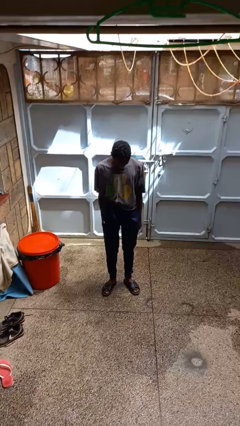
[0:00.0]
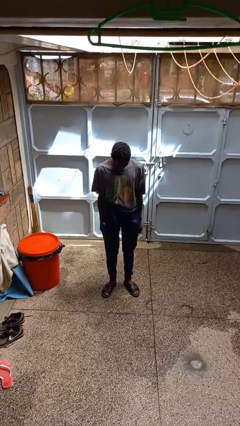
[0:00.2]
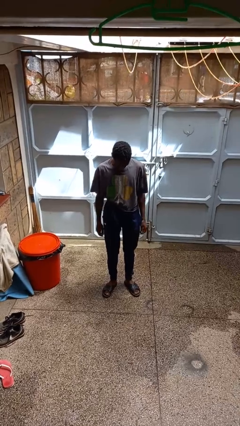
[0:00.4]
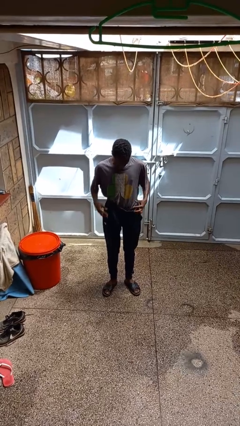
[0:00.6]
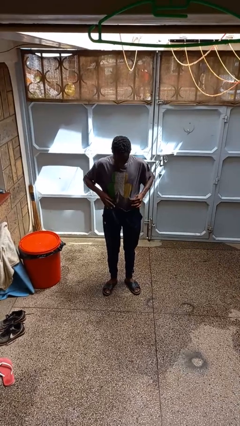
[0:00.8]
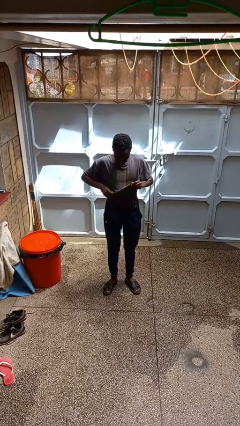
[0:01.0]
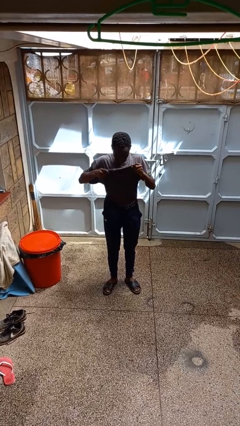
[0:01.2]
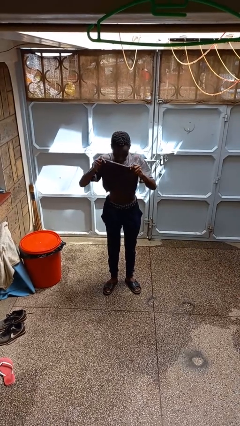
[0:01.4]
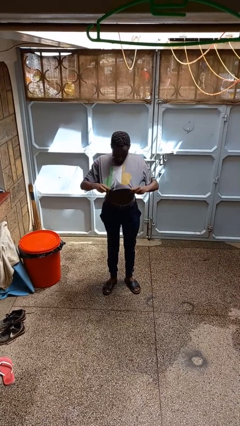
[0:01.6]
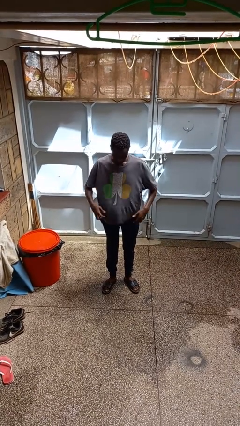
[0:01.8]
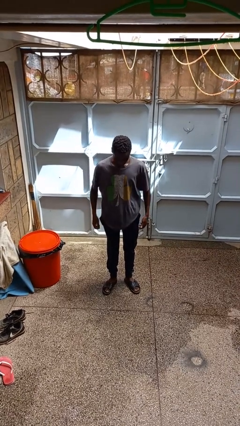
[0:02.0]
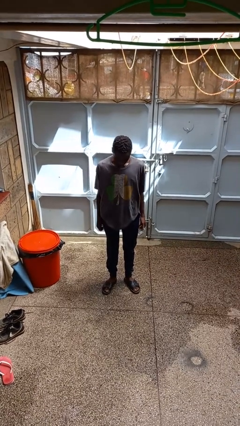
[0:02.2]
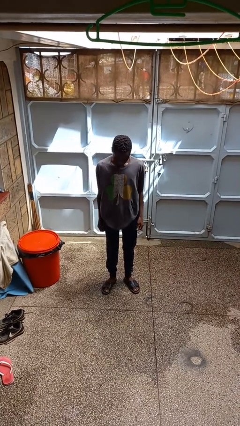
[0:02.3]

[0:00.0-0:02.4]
person untucks shirt

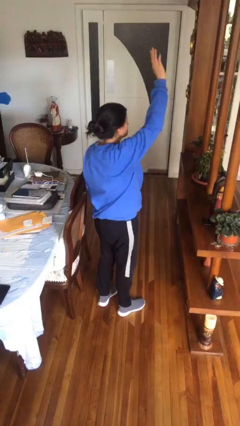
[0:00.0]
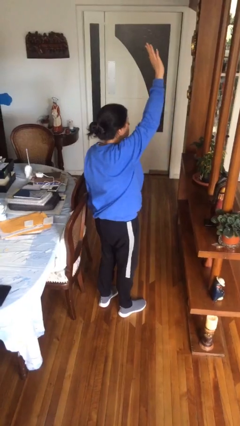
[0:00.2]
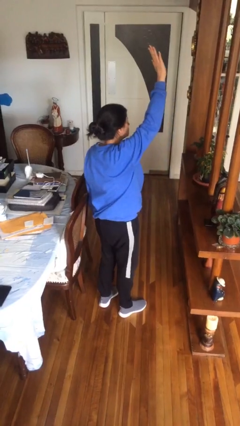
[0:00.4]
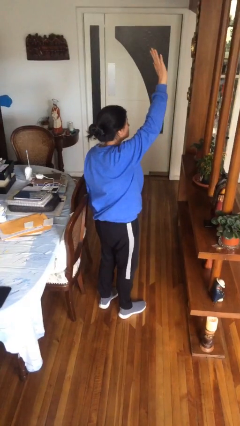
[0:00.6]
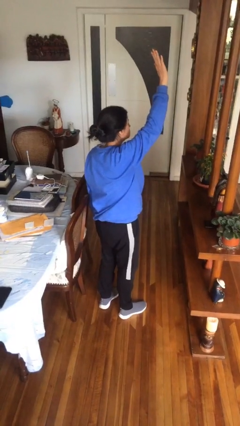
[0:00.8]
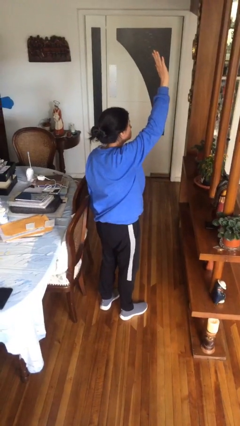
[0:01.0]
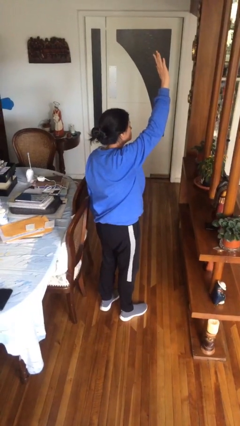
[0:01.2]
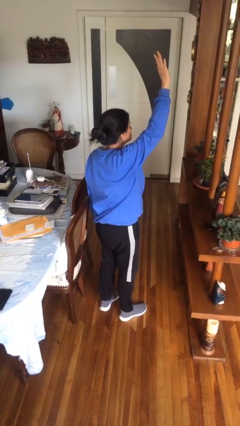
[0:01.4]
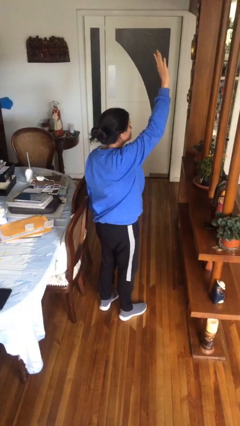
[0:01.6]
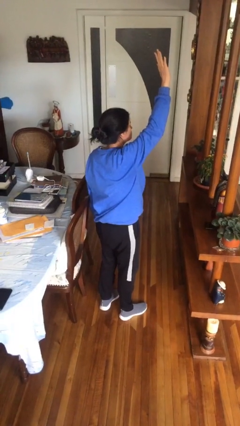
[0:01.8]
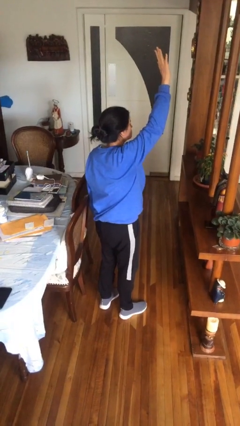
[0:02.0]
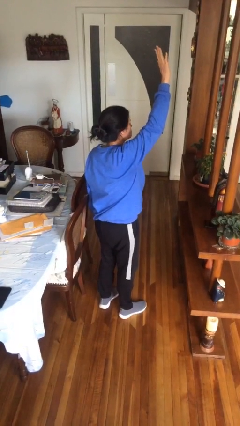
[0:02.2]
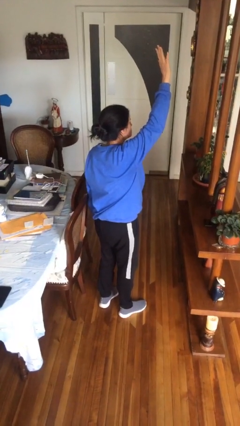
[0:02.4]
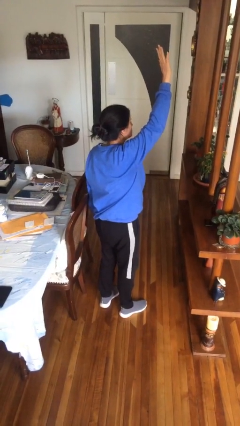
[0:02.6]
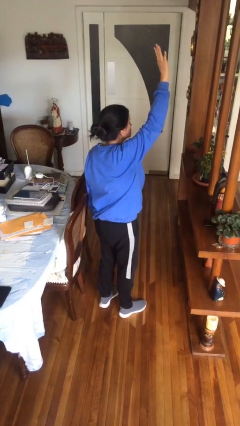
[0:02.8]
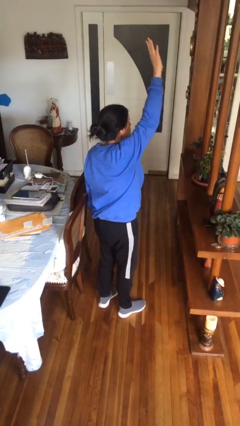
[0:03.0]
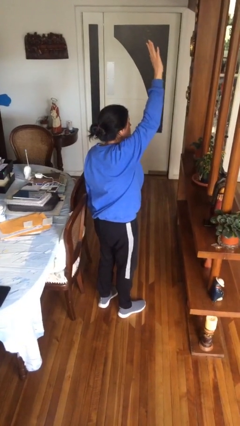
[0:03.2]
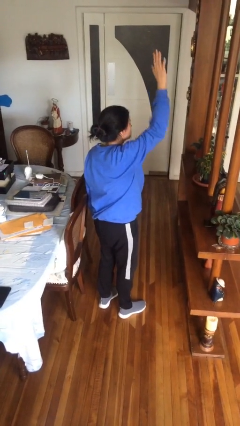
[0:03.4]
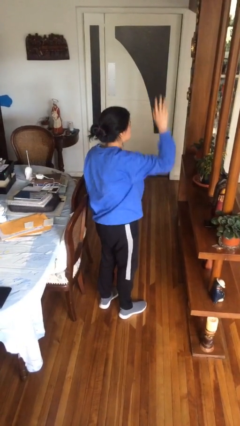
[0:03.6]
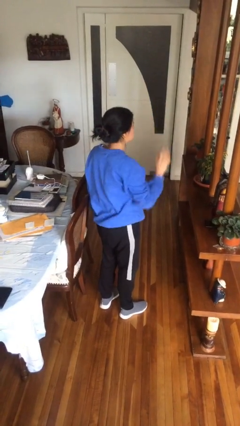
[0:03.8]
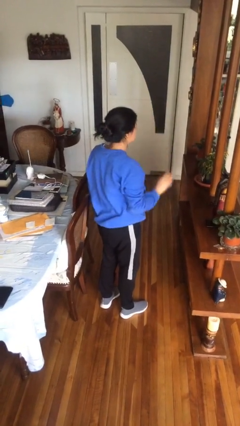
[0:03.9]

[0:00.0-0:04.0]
person gestures raise hand

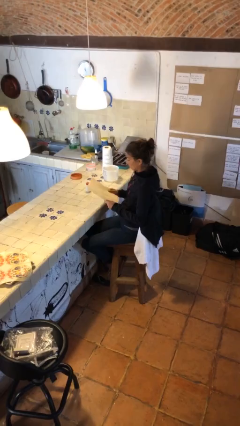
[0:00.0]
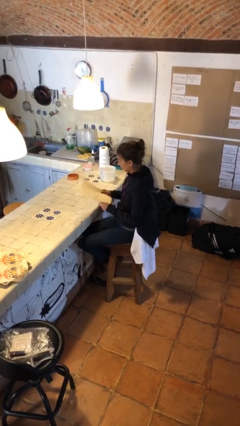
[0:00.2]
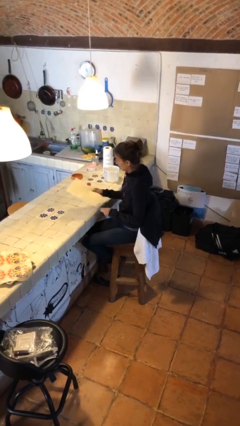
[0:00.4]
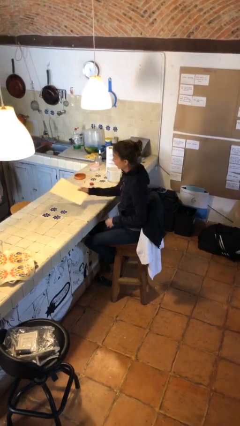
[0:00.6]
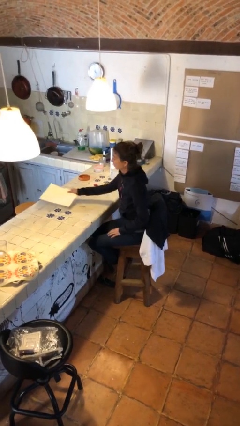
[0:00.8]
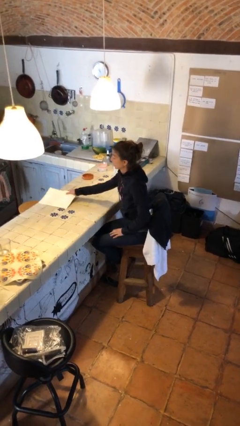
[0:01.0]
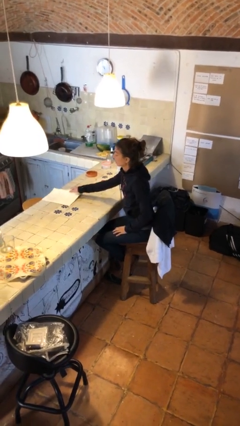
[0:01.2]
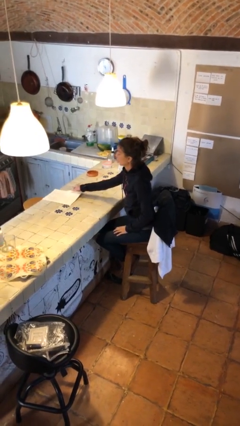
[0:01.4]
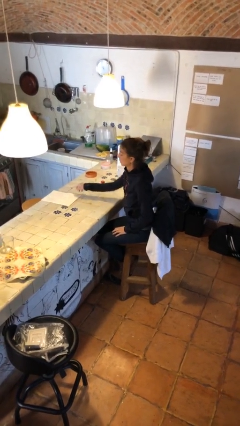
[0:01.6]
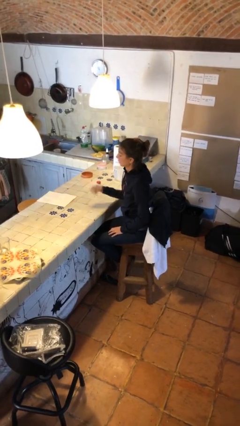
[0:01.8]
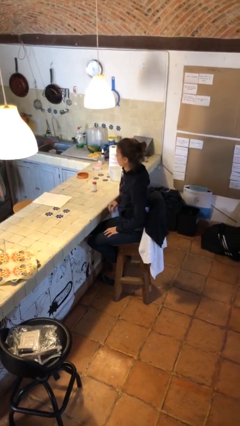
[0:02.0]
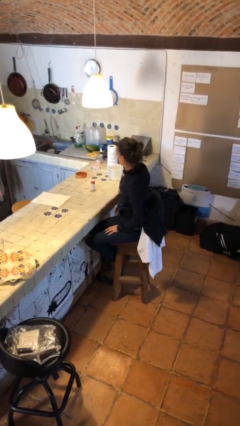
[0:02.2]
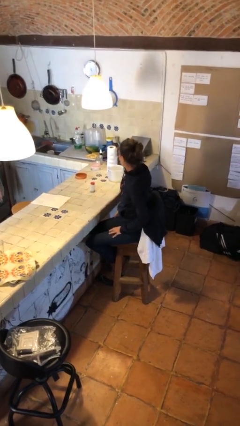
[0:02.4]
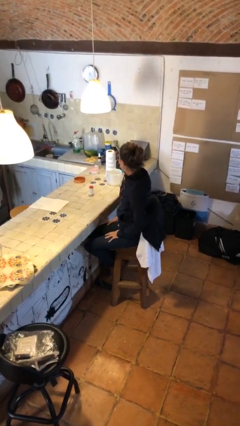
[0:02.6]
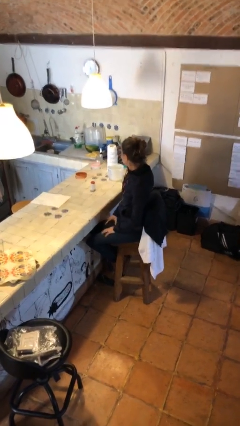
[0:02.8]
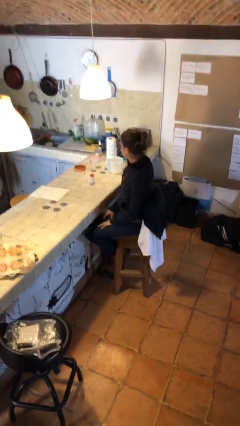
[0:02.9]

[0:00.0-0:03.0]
person puts down object on table

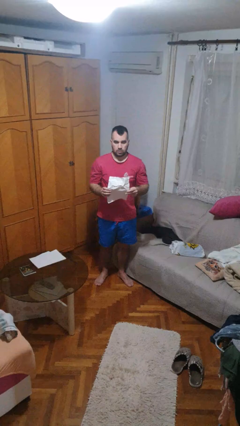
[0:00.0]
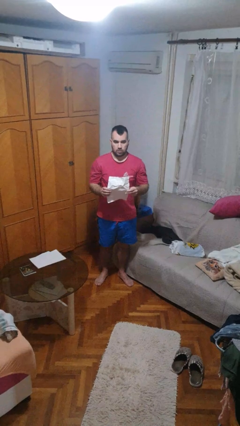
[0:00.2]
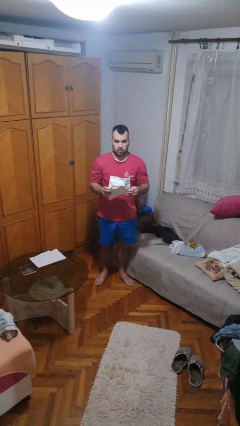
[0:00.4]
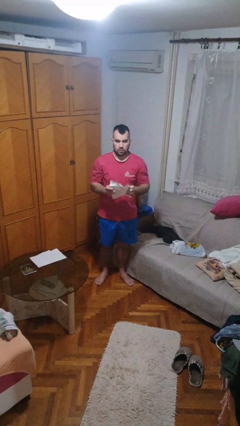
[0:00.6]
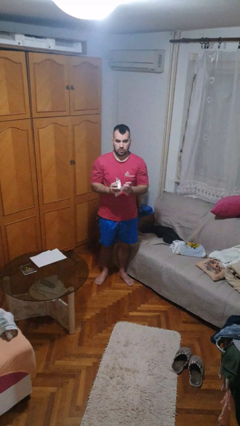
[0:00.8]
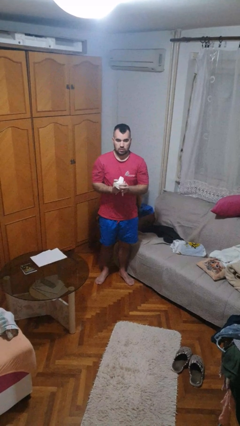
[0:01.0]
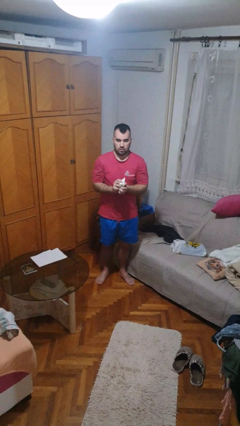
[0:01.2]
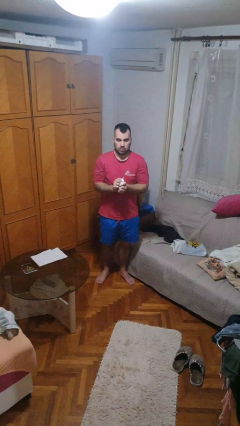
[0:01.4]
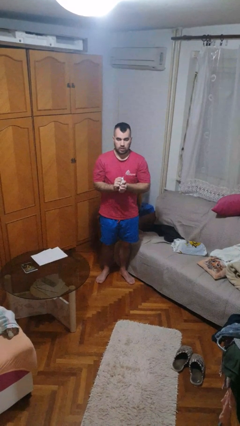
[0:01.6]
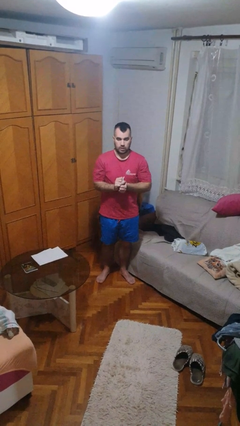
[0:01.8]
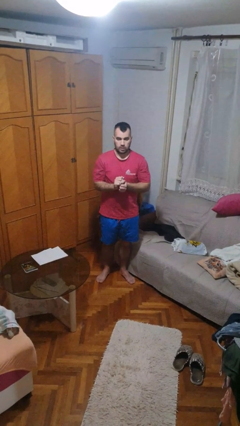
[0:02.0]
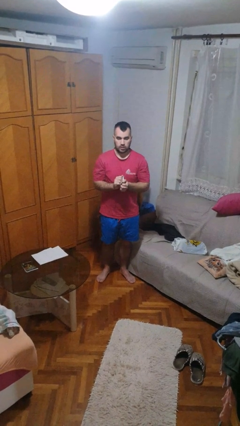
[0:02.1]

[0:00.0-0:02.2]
person crumples paper

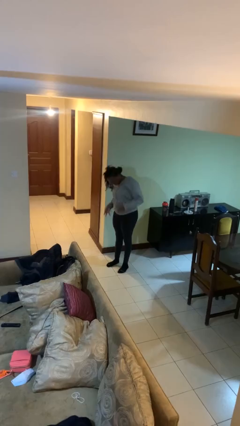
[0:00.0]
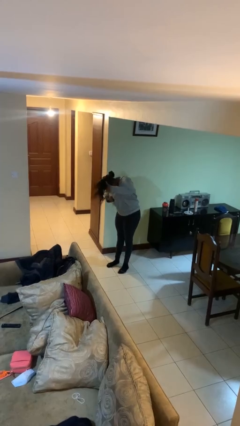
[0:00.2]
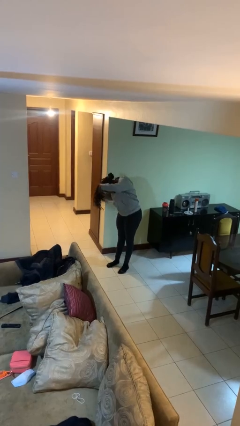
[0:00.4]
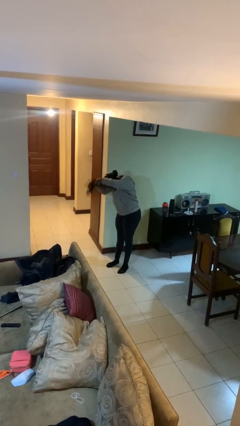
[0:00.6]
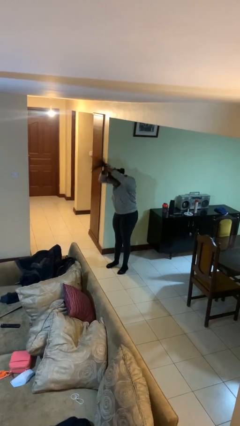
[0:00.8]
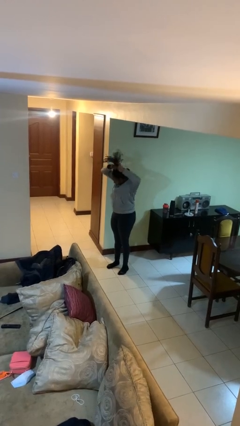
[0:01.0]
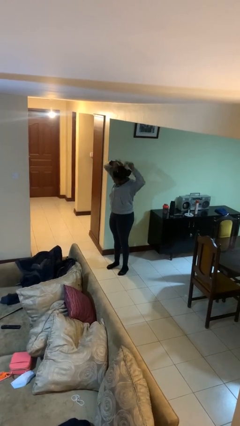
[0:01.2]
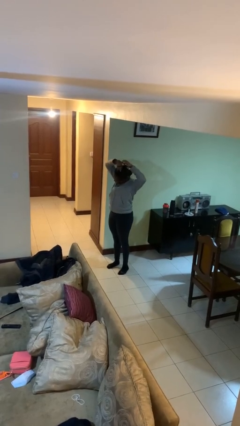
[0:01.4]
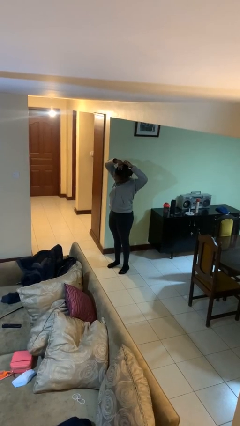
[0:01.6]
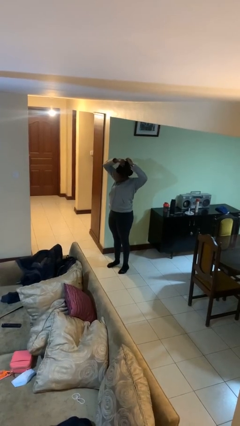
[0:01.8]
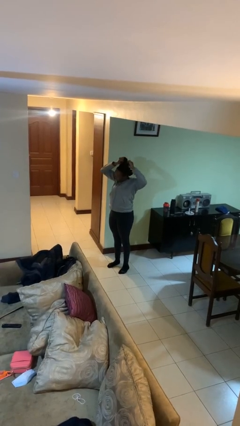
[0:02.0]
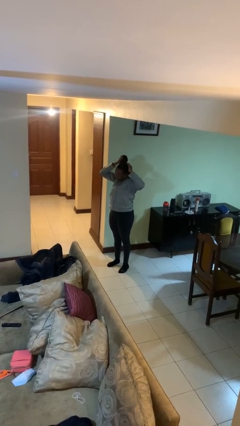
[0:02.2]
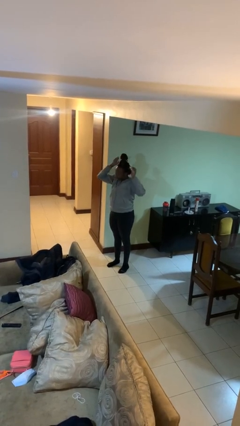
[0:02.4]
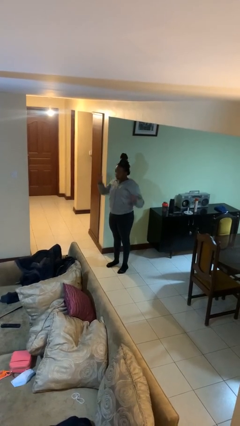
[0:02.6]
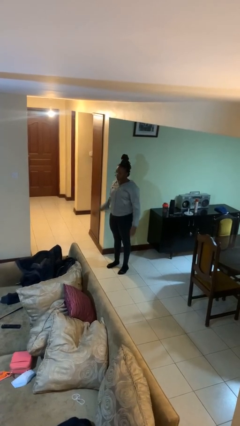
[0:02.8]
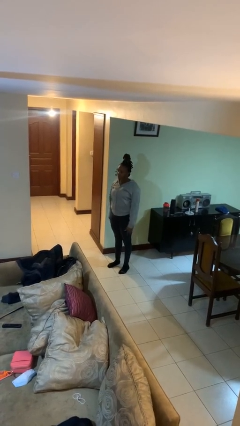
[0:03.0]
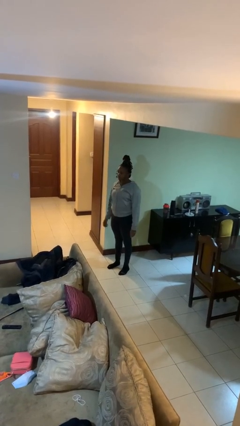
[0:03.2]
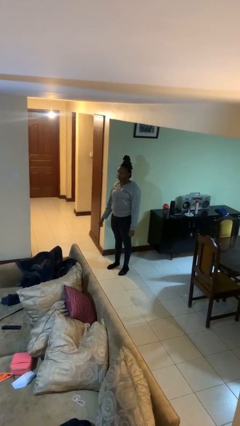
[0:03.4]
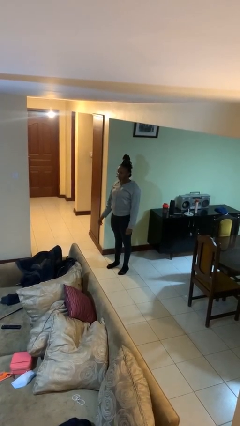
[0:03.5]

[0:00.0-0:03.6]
person puts hair in ponytail

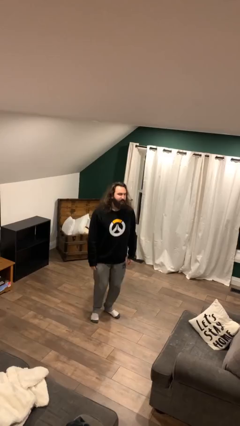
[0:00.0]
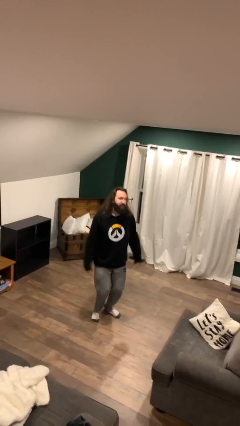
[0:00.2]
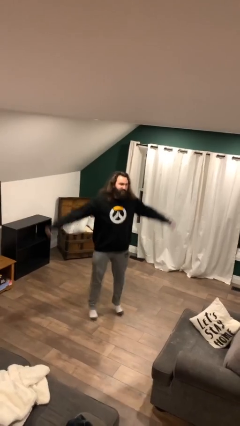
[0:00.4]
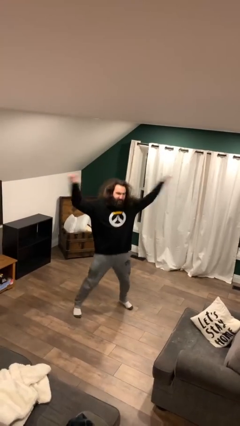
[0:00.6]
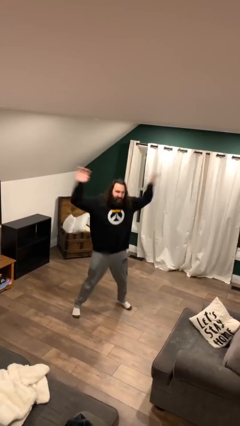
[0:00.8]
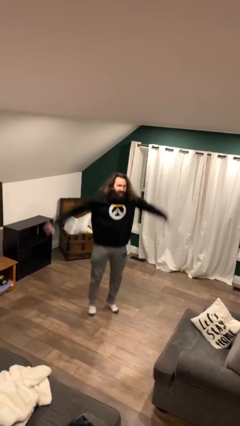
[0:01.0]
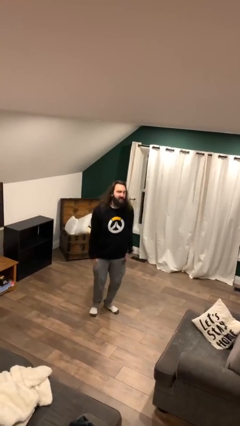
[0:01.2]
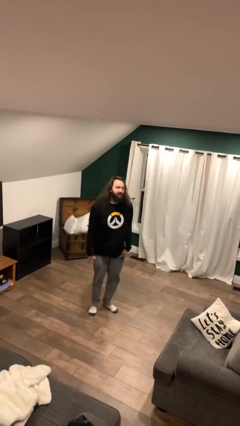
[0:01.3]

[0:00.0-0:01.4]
person exercises with jumping jacks

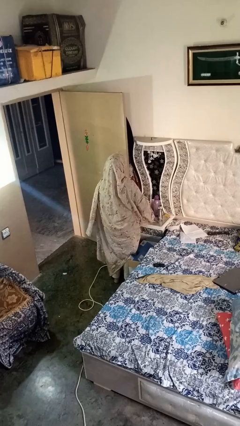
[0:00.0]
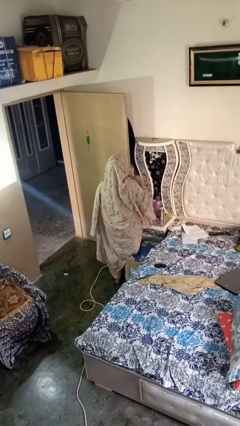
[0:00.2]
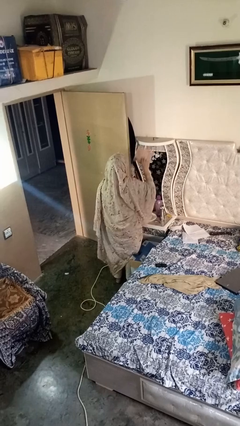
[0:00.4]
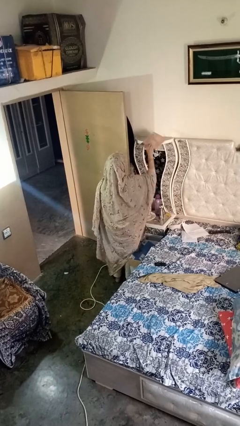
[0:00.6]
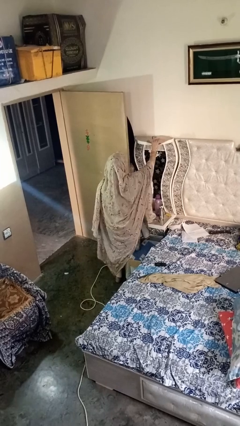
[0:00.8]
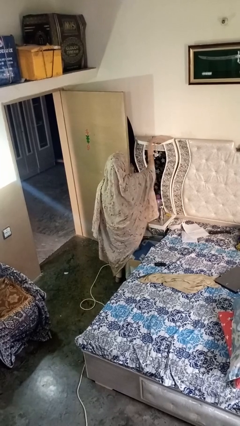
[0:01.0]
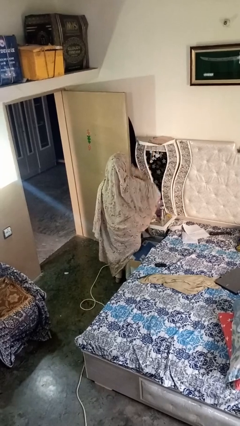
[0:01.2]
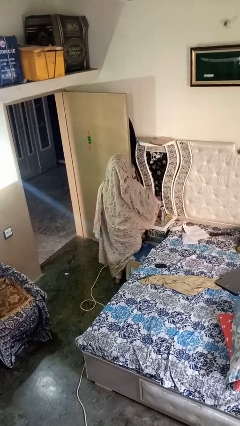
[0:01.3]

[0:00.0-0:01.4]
person puts down object on shelf
